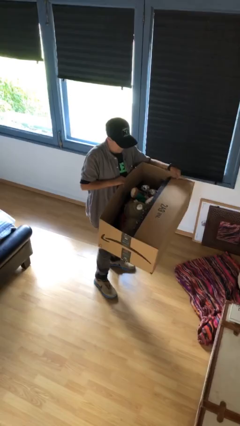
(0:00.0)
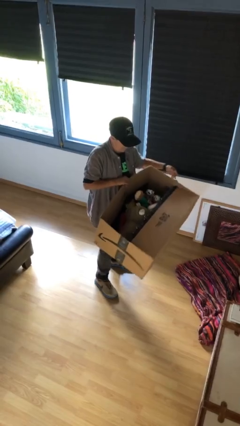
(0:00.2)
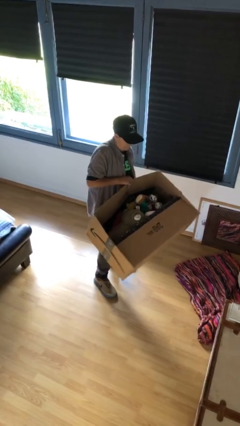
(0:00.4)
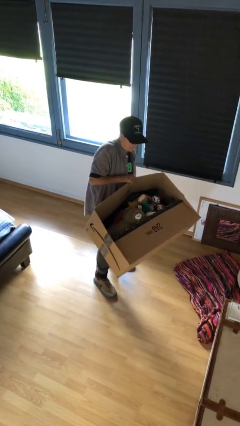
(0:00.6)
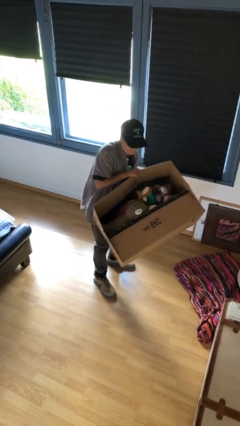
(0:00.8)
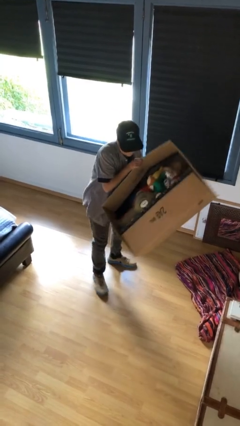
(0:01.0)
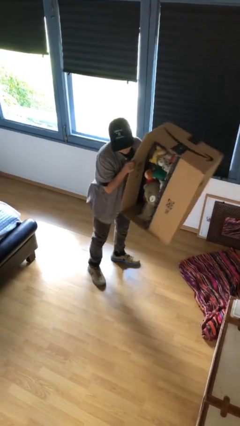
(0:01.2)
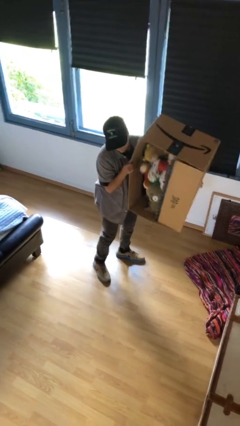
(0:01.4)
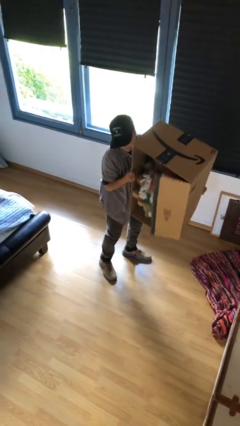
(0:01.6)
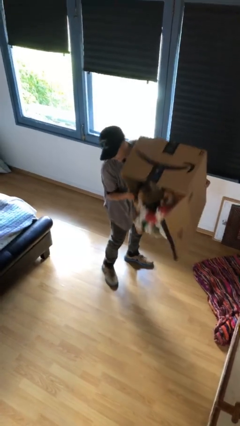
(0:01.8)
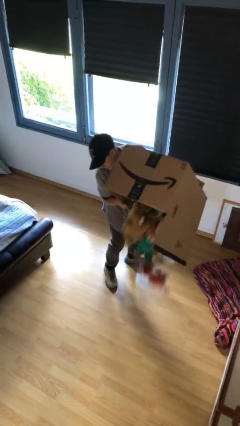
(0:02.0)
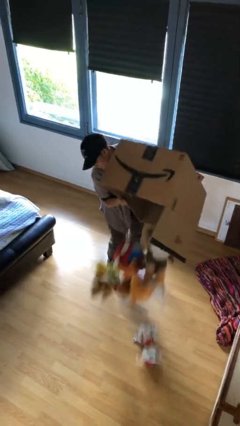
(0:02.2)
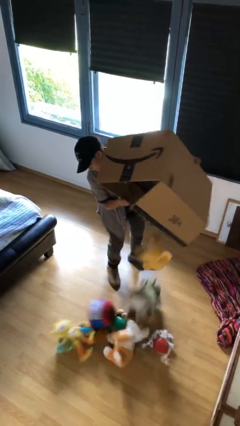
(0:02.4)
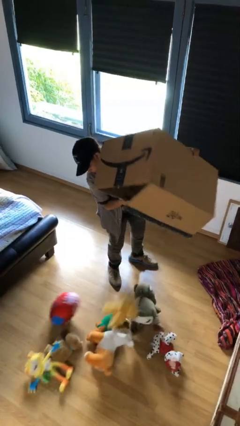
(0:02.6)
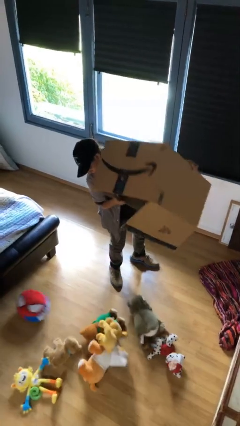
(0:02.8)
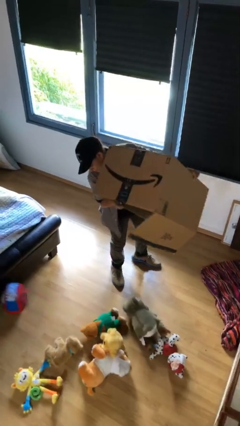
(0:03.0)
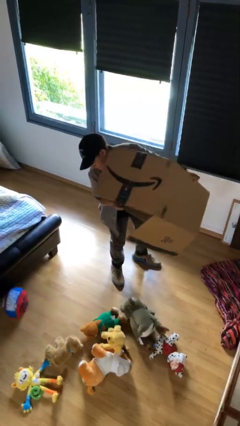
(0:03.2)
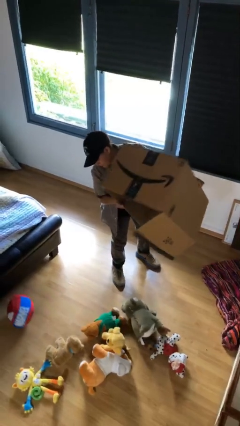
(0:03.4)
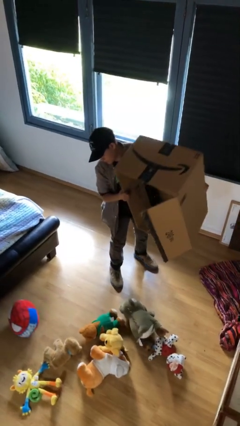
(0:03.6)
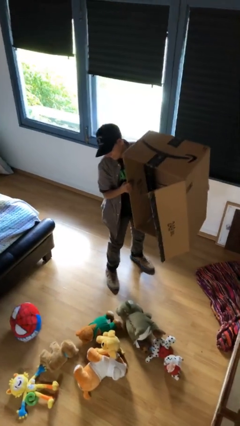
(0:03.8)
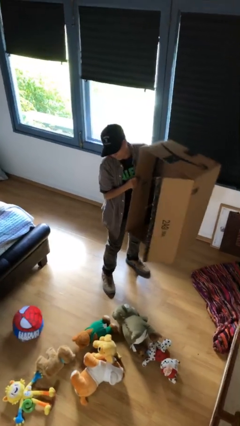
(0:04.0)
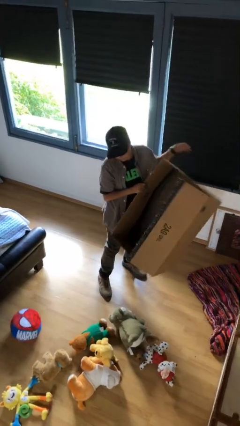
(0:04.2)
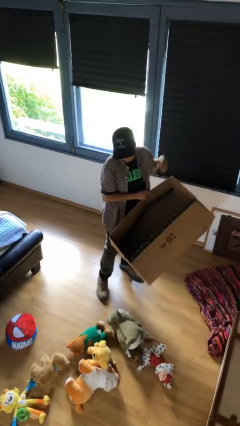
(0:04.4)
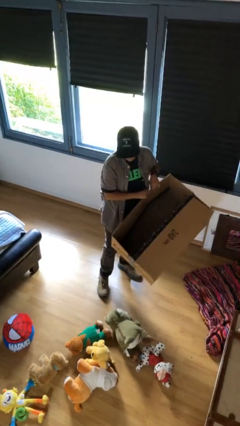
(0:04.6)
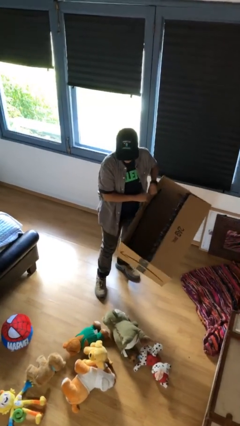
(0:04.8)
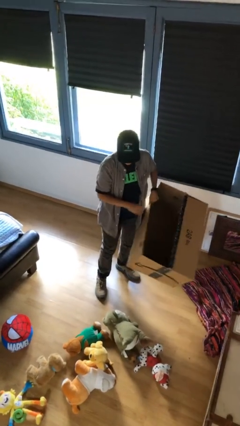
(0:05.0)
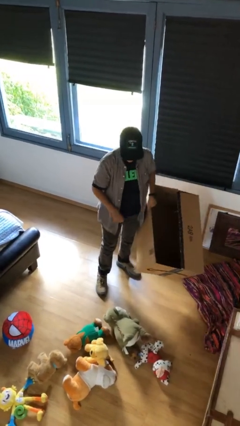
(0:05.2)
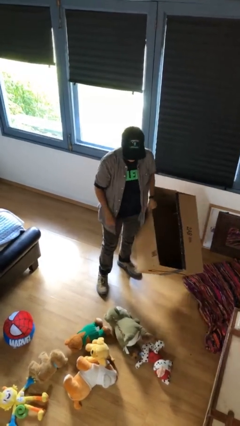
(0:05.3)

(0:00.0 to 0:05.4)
person unloads box onto floor

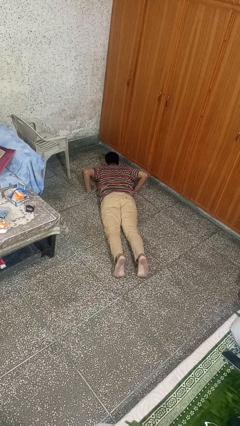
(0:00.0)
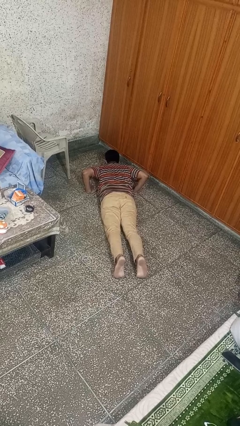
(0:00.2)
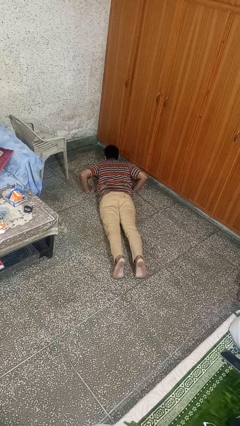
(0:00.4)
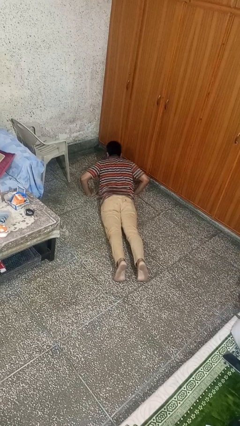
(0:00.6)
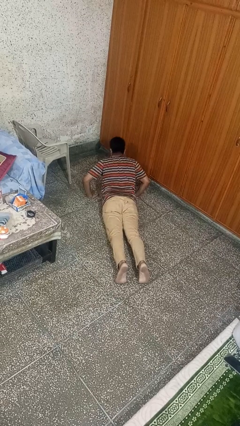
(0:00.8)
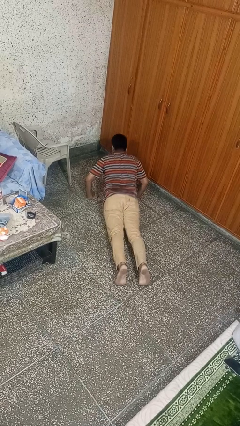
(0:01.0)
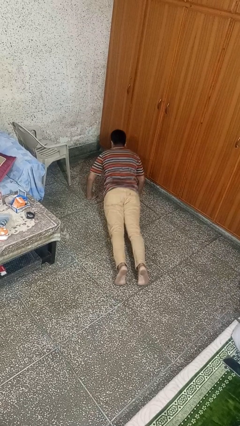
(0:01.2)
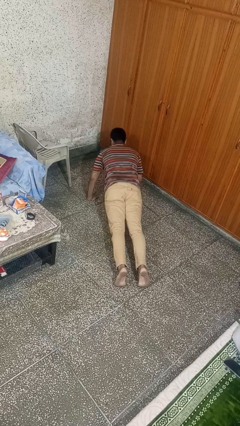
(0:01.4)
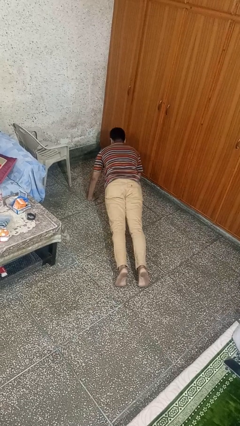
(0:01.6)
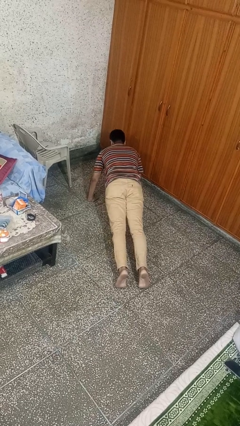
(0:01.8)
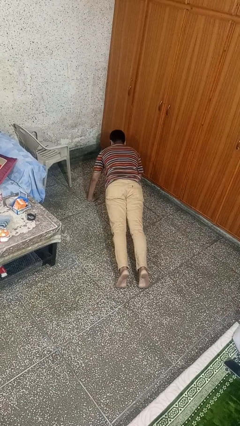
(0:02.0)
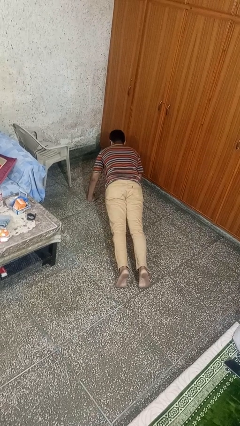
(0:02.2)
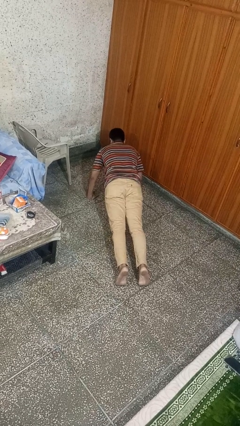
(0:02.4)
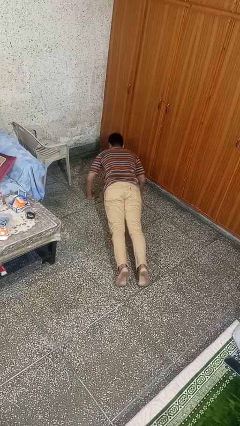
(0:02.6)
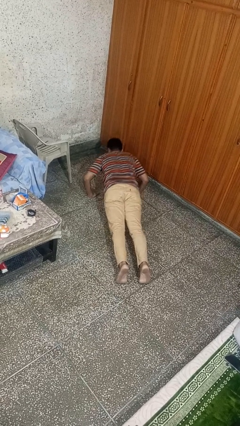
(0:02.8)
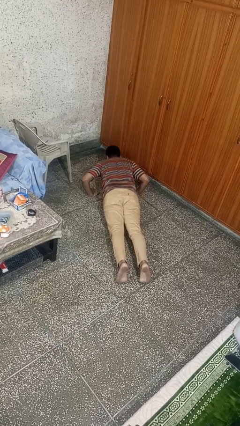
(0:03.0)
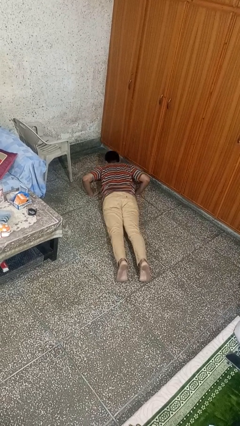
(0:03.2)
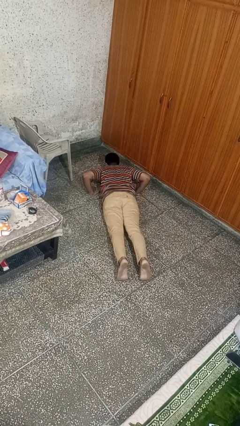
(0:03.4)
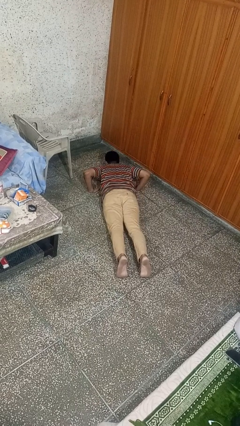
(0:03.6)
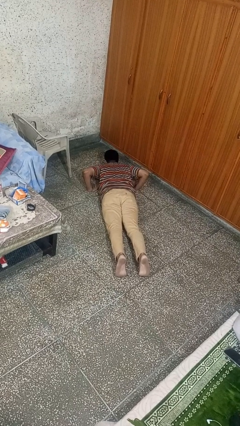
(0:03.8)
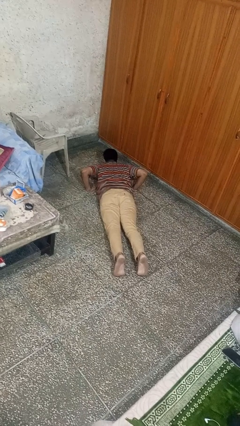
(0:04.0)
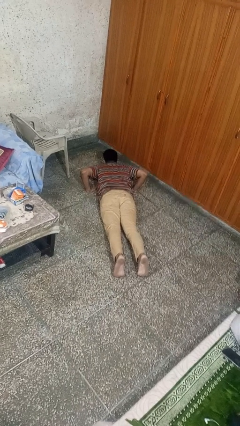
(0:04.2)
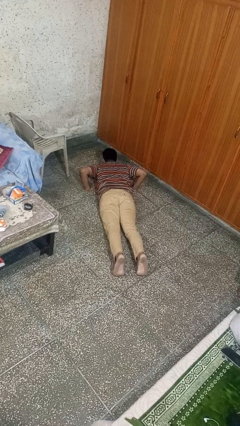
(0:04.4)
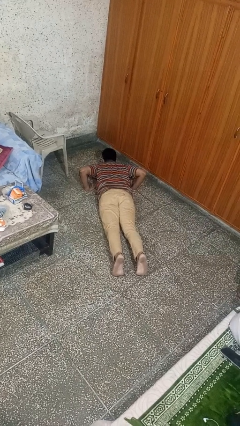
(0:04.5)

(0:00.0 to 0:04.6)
person exercises with pushup

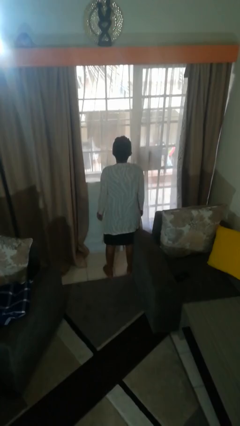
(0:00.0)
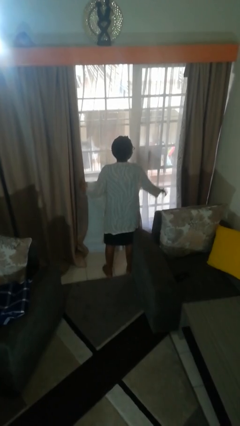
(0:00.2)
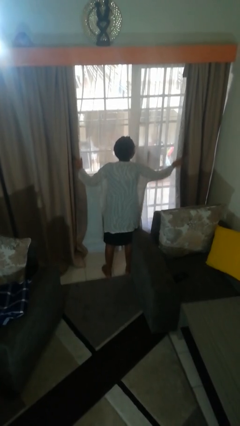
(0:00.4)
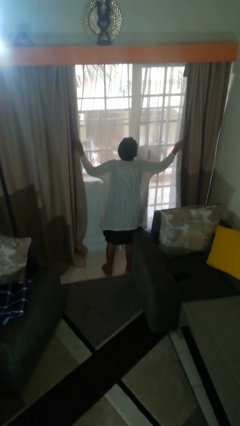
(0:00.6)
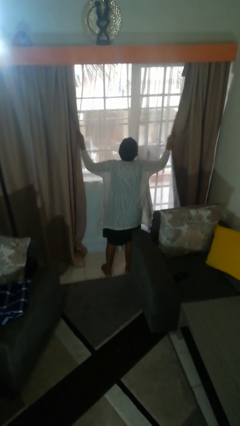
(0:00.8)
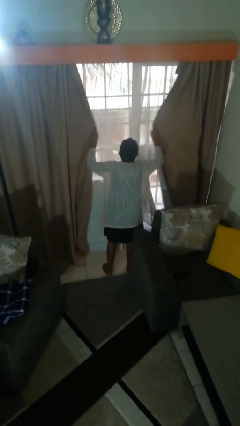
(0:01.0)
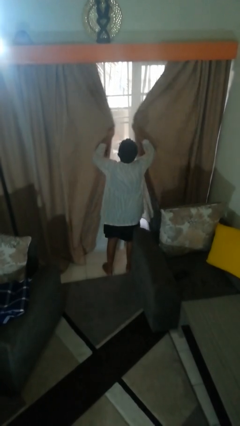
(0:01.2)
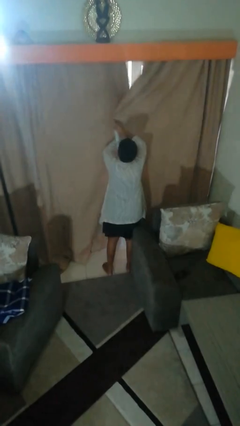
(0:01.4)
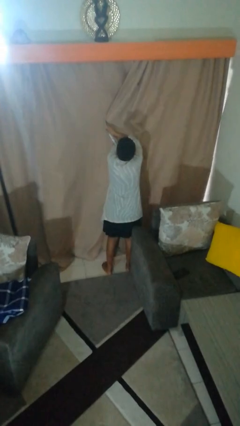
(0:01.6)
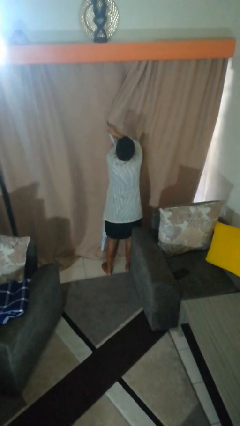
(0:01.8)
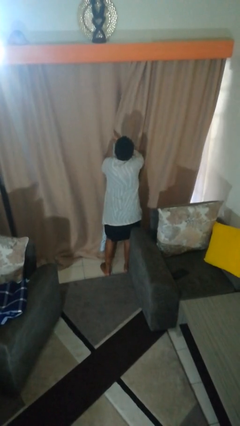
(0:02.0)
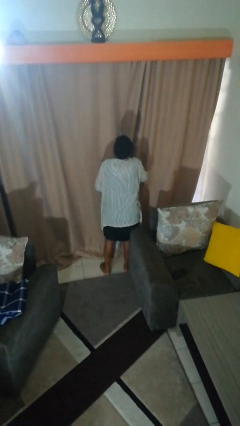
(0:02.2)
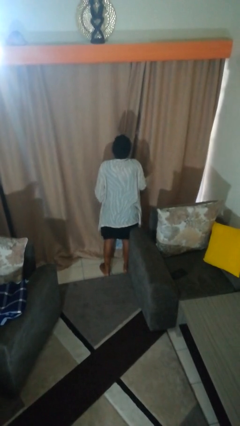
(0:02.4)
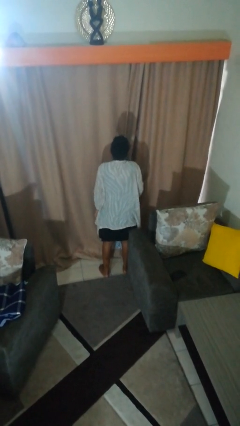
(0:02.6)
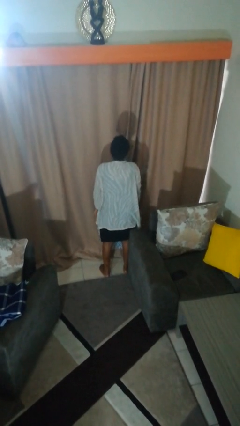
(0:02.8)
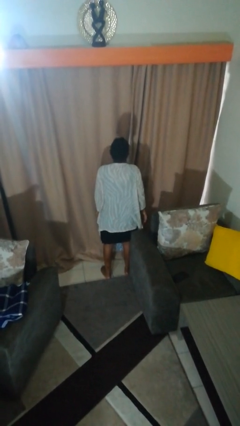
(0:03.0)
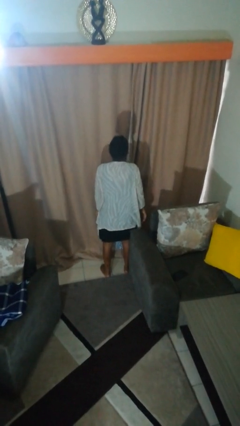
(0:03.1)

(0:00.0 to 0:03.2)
person closes curtains

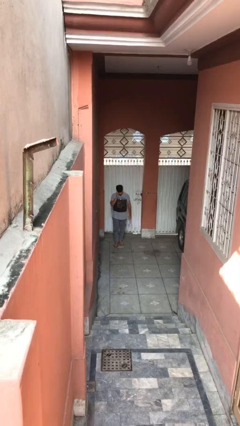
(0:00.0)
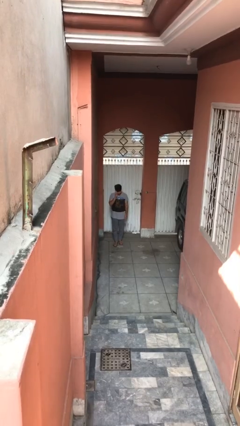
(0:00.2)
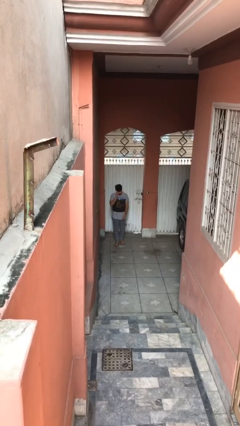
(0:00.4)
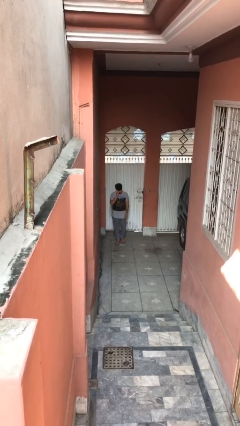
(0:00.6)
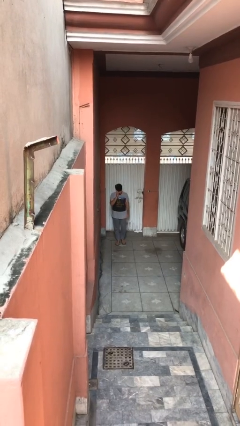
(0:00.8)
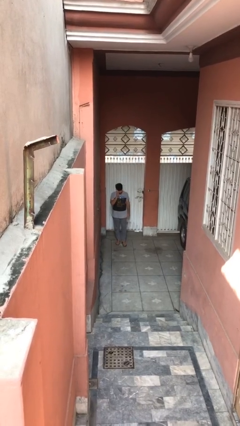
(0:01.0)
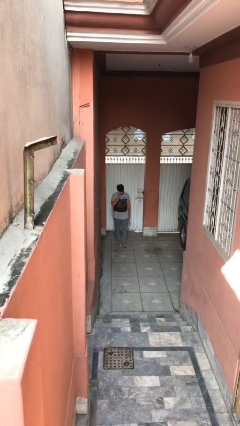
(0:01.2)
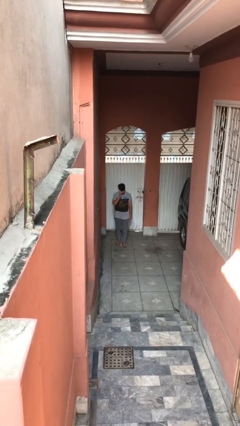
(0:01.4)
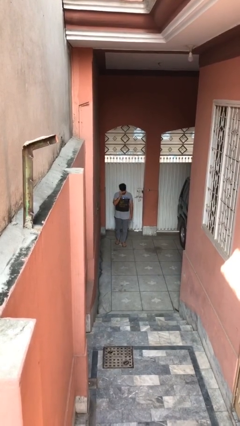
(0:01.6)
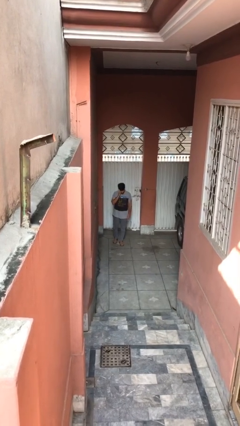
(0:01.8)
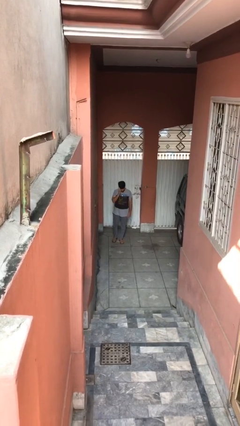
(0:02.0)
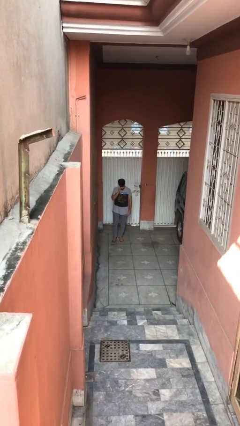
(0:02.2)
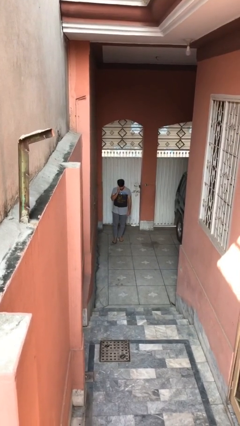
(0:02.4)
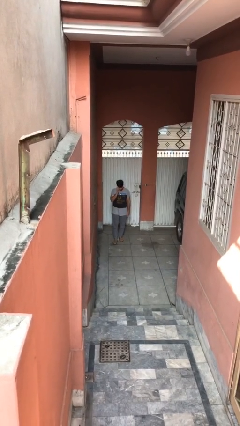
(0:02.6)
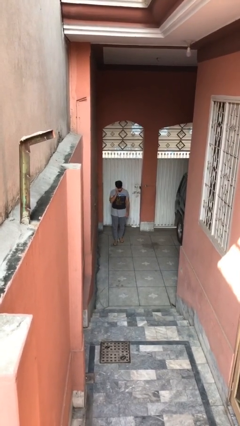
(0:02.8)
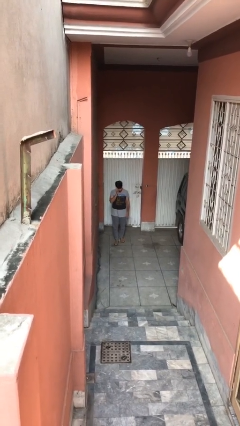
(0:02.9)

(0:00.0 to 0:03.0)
person talks on phone

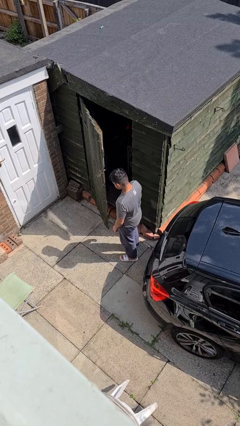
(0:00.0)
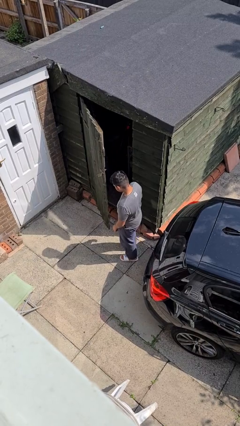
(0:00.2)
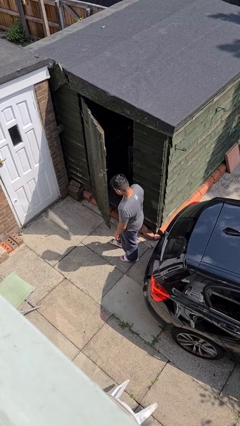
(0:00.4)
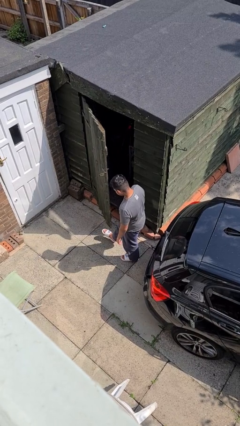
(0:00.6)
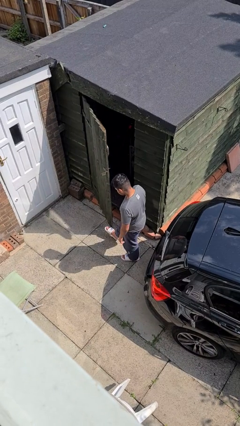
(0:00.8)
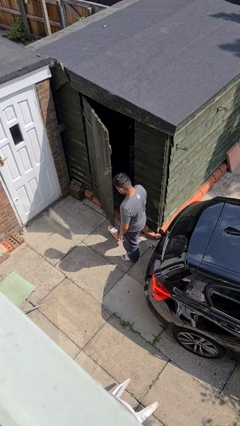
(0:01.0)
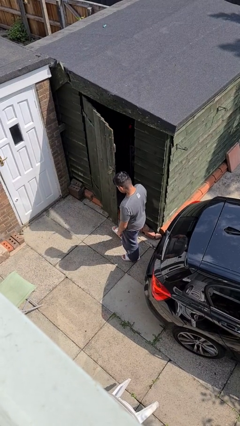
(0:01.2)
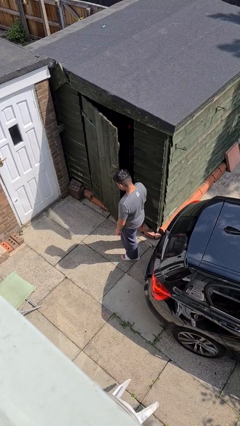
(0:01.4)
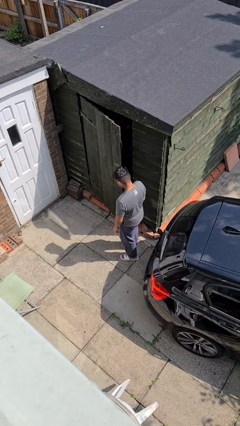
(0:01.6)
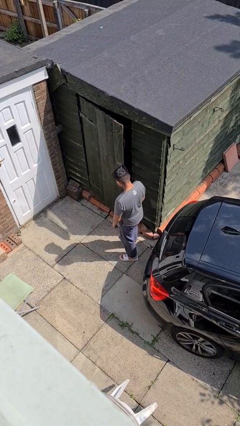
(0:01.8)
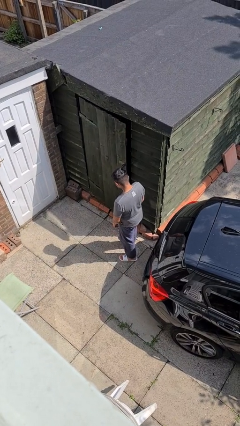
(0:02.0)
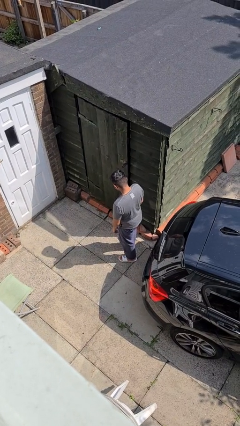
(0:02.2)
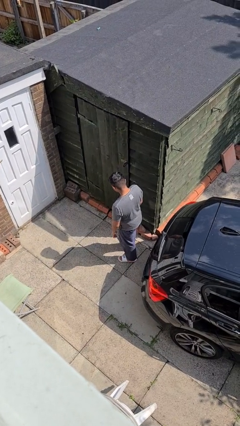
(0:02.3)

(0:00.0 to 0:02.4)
person closes door with foot
